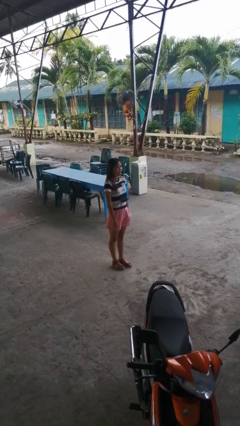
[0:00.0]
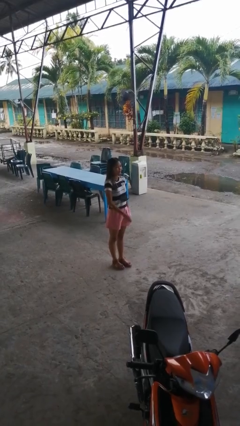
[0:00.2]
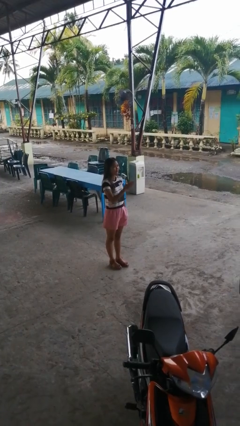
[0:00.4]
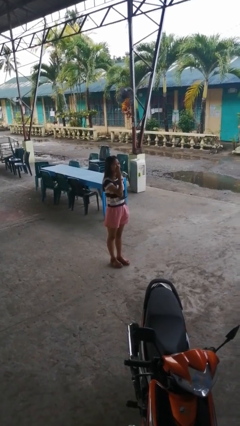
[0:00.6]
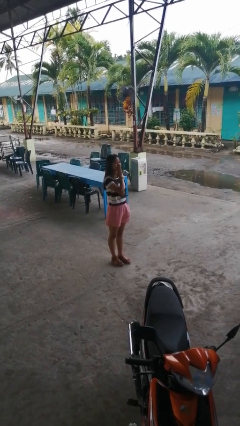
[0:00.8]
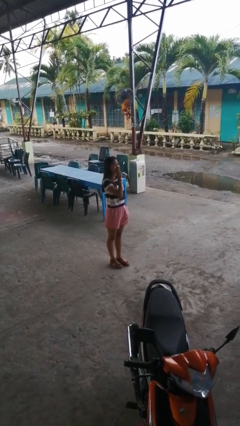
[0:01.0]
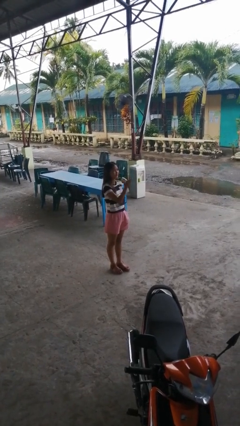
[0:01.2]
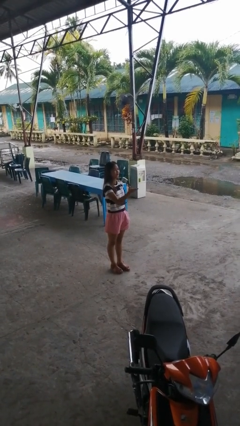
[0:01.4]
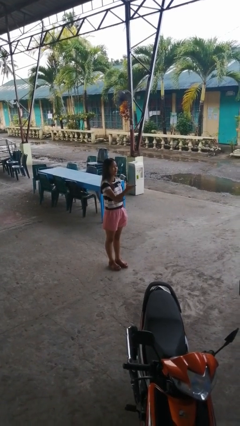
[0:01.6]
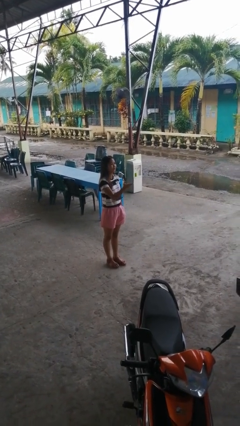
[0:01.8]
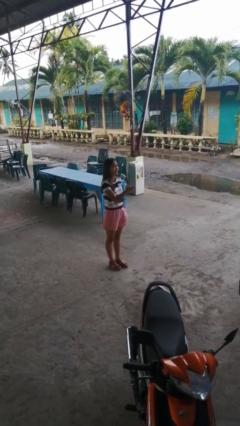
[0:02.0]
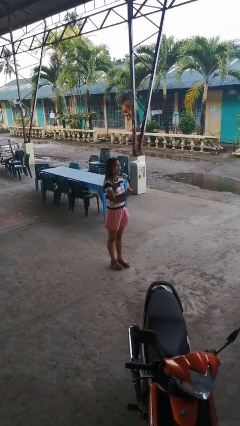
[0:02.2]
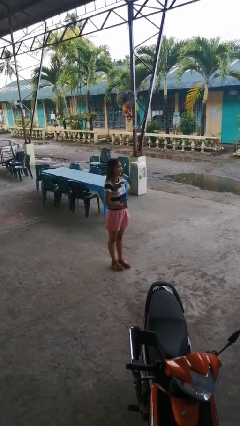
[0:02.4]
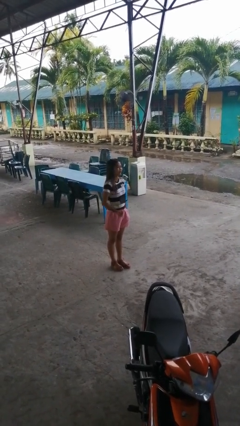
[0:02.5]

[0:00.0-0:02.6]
person gestures blow kiss

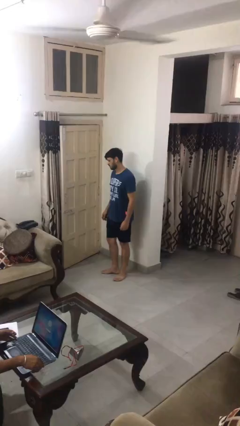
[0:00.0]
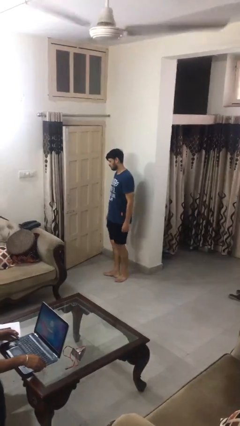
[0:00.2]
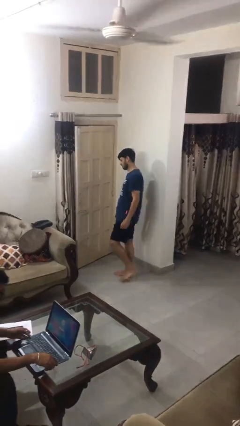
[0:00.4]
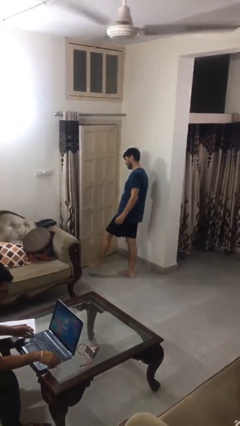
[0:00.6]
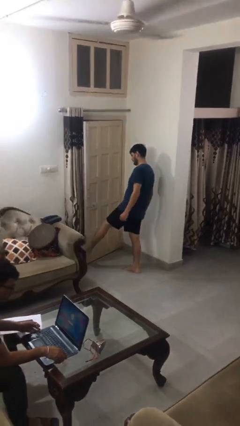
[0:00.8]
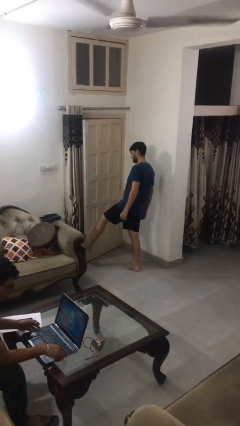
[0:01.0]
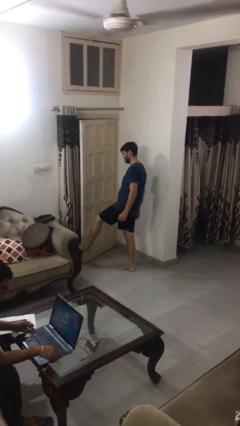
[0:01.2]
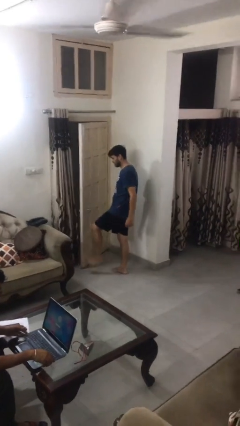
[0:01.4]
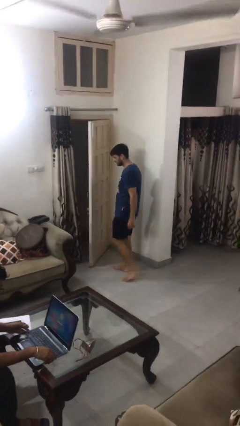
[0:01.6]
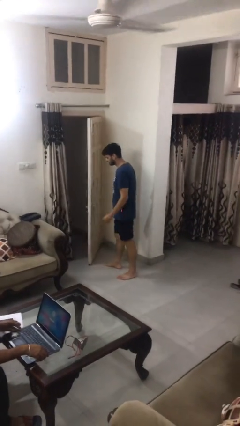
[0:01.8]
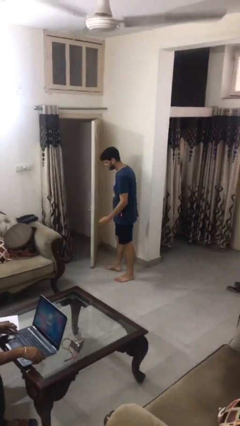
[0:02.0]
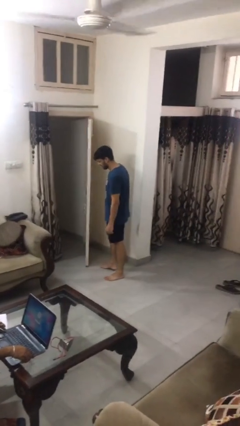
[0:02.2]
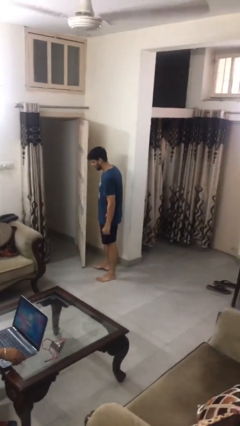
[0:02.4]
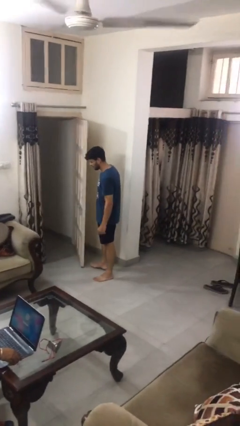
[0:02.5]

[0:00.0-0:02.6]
person opens facility door

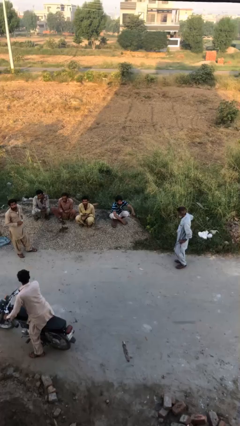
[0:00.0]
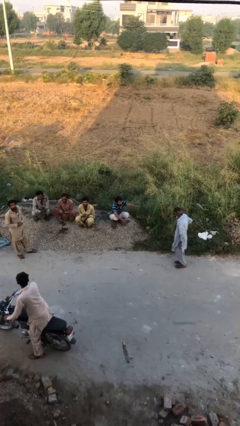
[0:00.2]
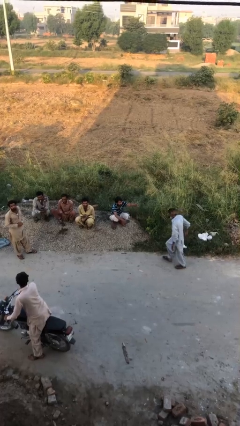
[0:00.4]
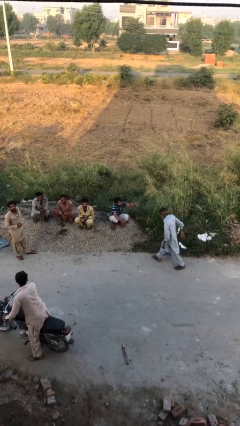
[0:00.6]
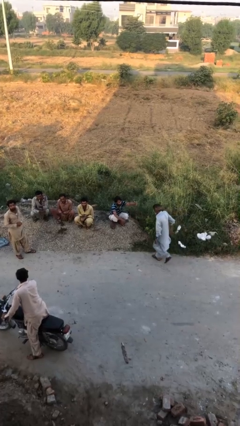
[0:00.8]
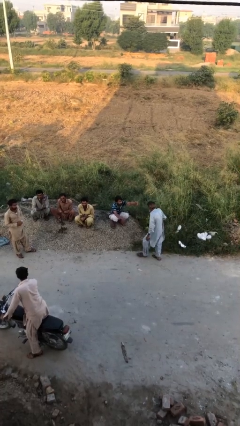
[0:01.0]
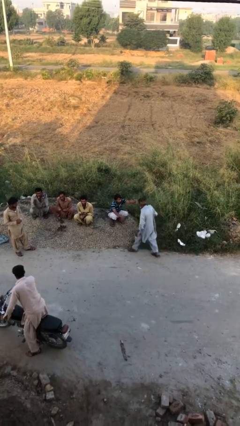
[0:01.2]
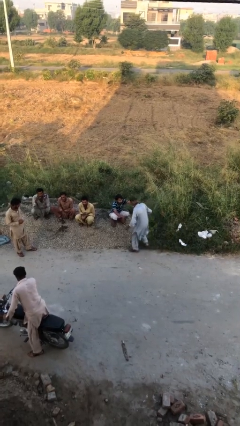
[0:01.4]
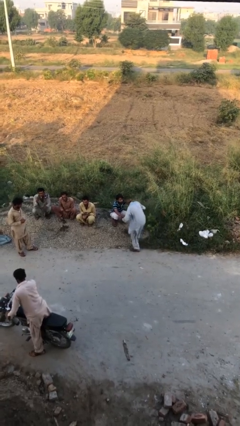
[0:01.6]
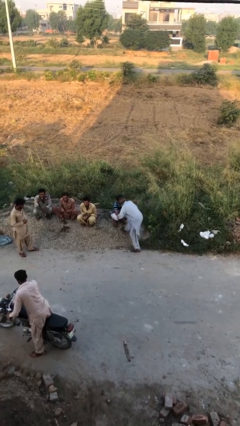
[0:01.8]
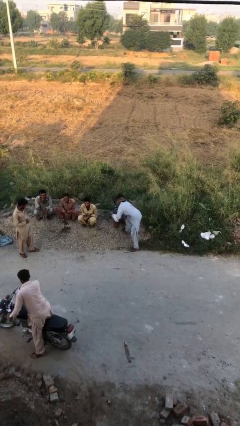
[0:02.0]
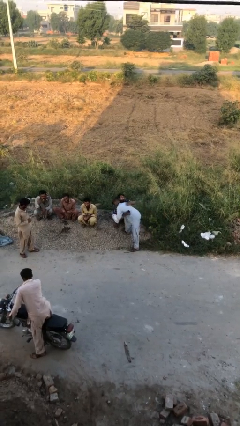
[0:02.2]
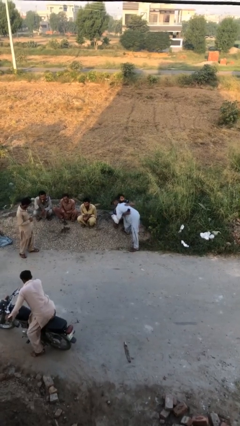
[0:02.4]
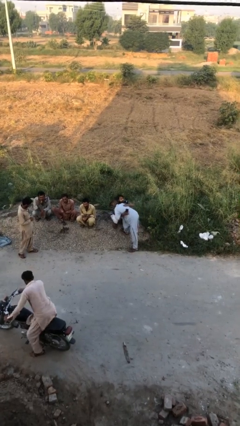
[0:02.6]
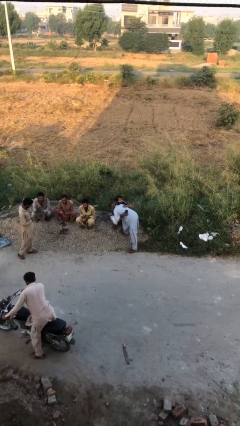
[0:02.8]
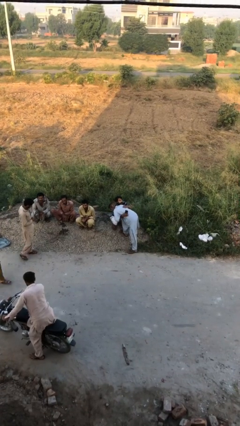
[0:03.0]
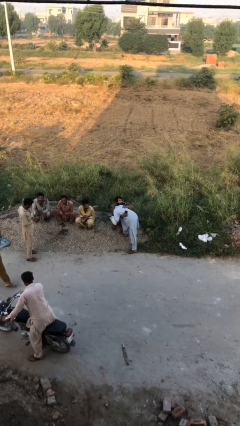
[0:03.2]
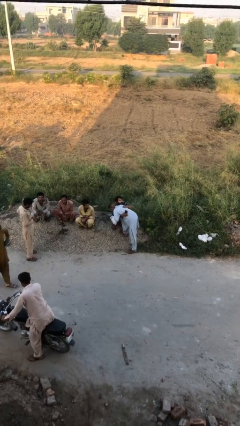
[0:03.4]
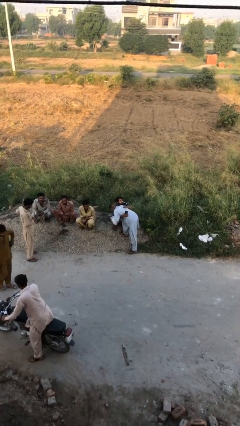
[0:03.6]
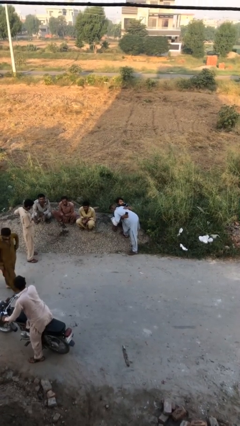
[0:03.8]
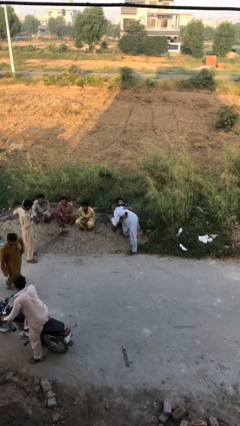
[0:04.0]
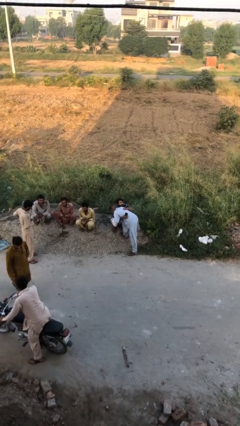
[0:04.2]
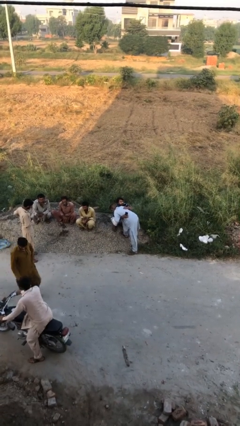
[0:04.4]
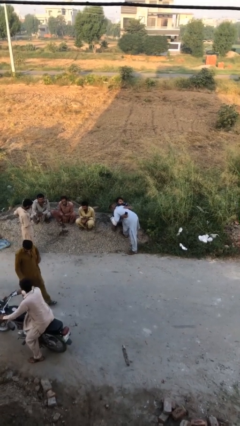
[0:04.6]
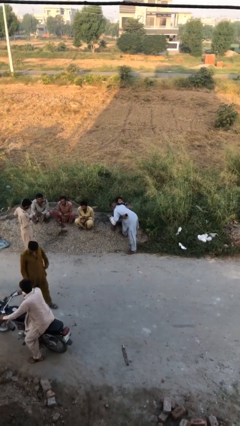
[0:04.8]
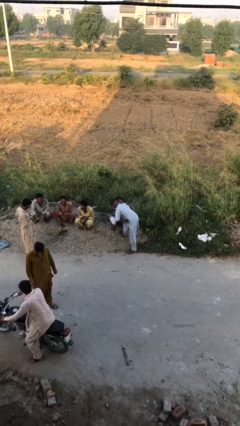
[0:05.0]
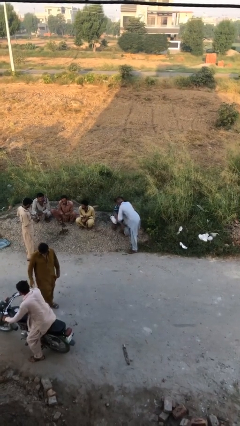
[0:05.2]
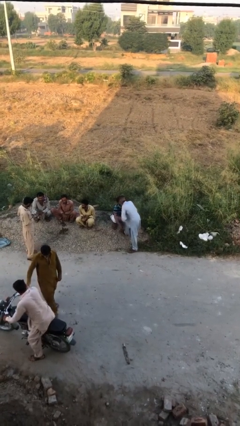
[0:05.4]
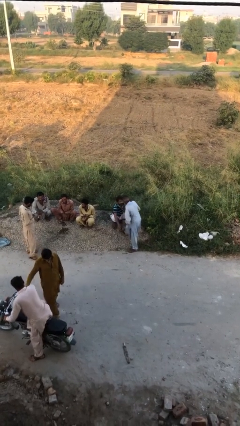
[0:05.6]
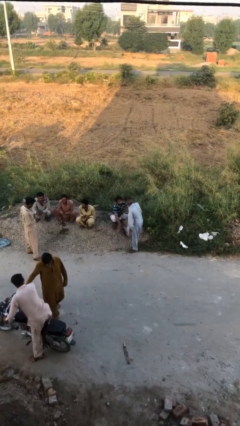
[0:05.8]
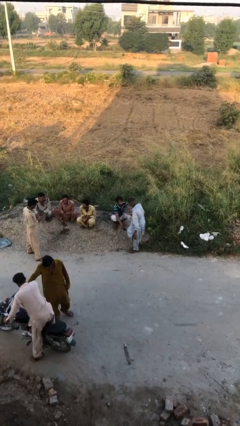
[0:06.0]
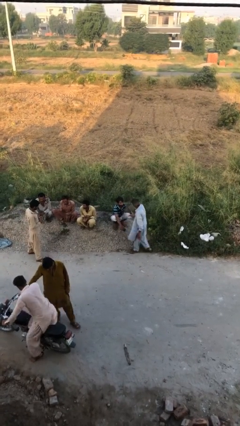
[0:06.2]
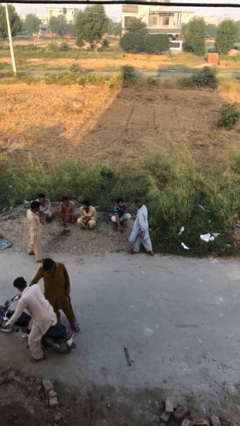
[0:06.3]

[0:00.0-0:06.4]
person embraces person

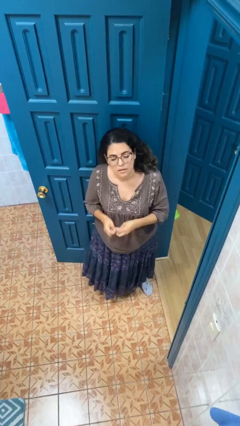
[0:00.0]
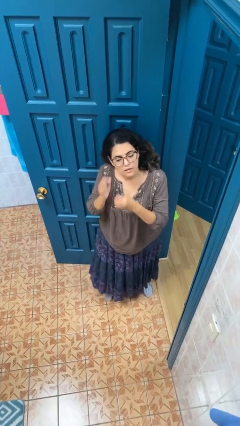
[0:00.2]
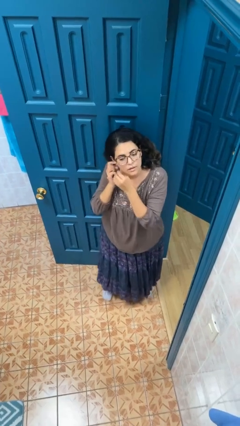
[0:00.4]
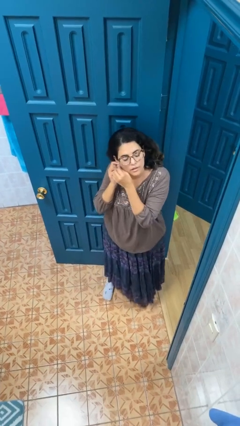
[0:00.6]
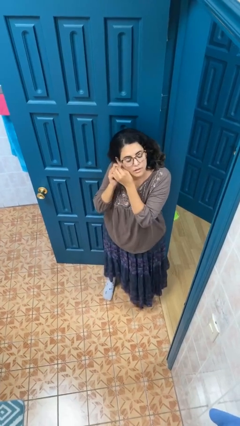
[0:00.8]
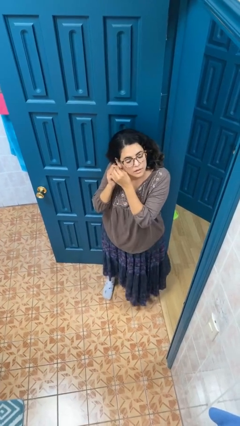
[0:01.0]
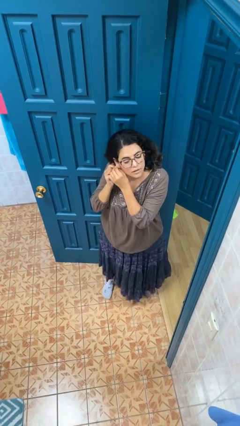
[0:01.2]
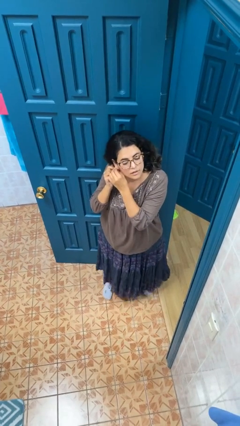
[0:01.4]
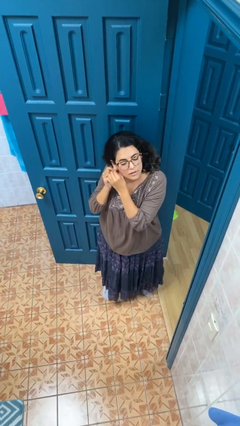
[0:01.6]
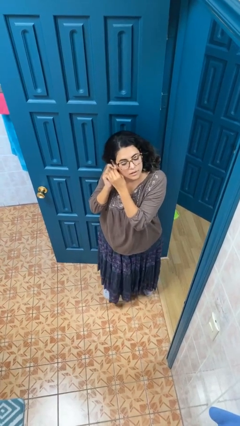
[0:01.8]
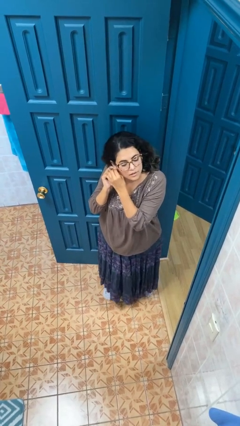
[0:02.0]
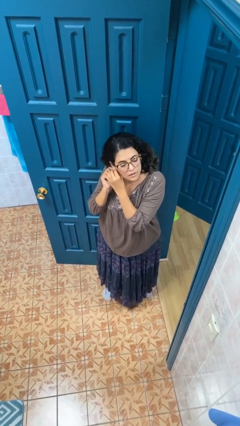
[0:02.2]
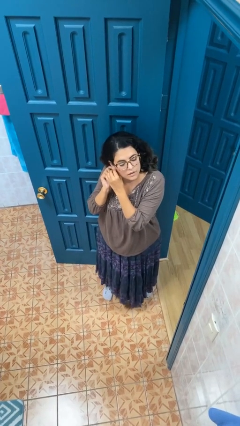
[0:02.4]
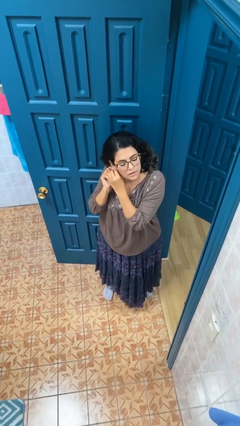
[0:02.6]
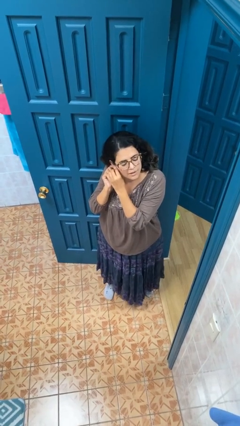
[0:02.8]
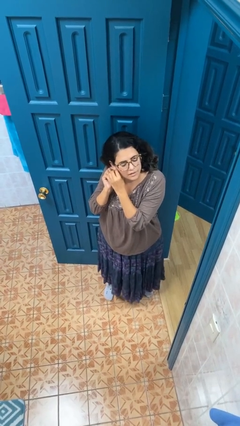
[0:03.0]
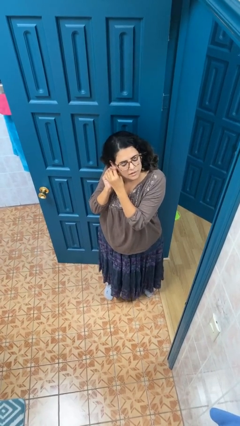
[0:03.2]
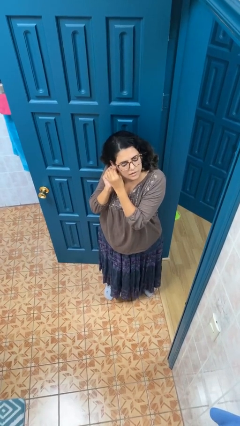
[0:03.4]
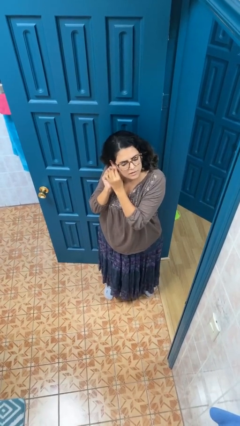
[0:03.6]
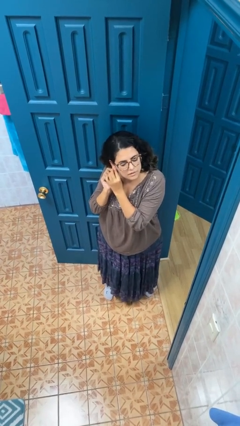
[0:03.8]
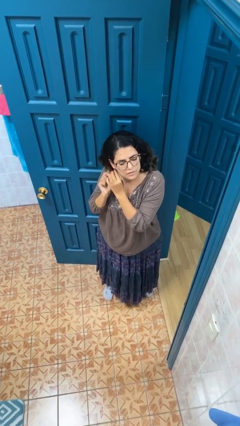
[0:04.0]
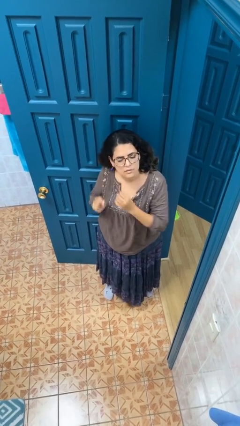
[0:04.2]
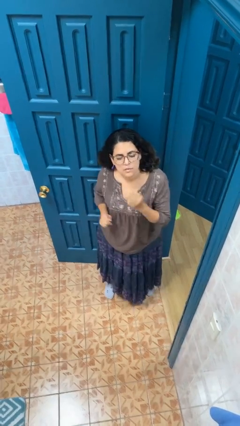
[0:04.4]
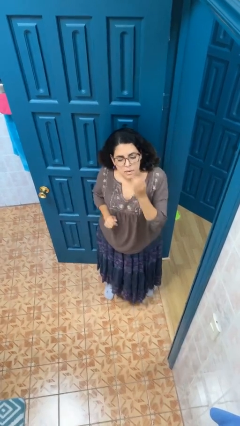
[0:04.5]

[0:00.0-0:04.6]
person puts on earrings

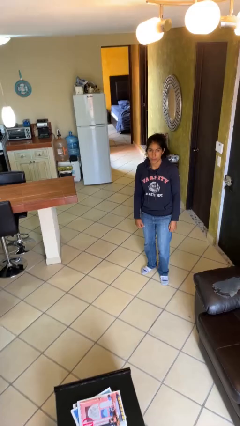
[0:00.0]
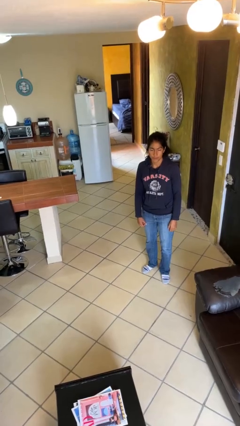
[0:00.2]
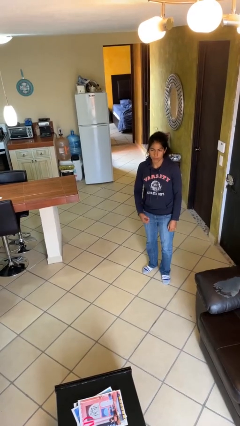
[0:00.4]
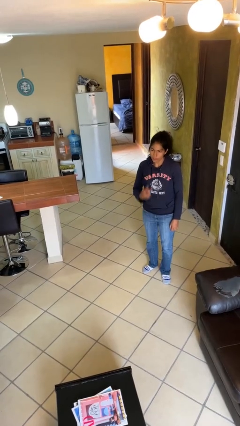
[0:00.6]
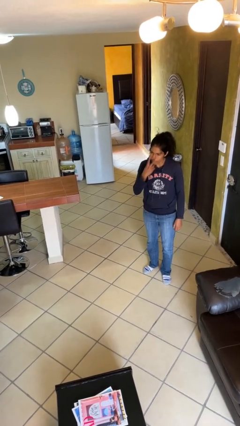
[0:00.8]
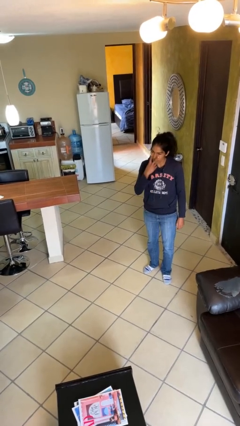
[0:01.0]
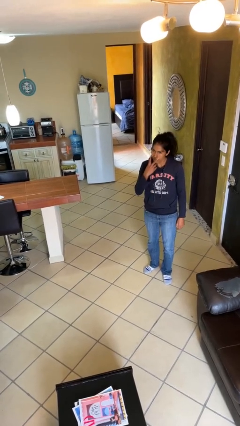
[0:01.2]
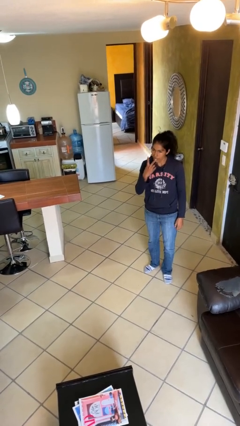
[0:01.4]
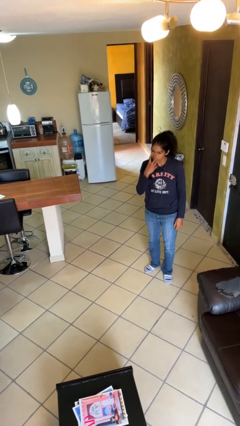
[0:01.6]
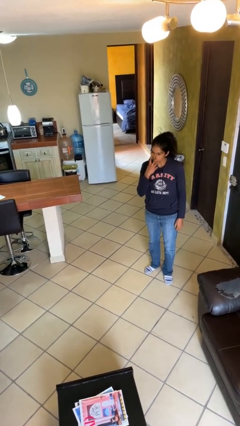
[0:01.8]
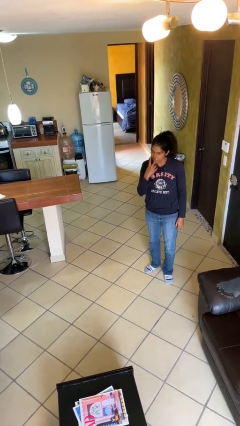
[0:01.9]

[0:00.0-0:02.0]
person gestures watch closely
